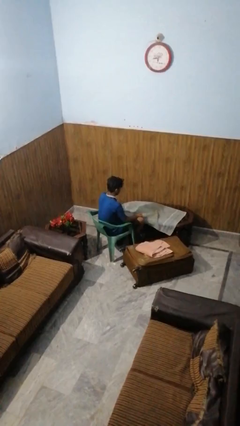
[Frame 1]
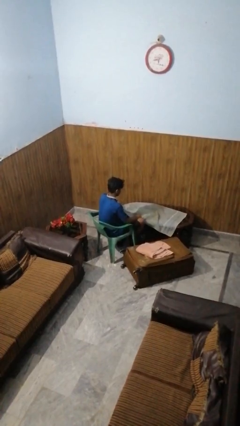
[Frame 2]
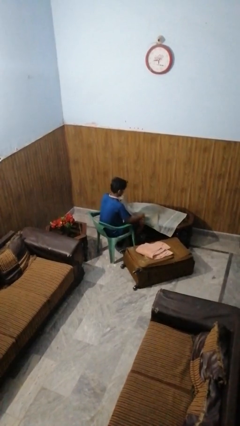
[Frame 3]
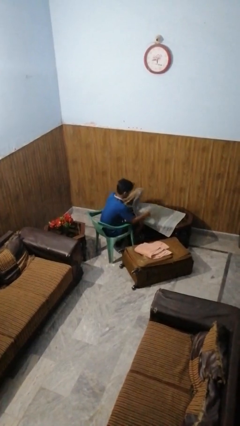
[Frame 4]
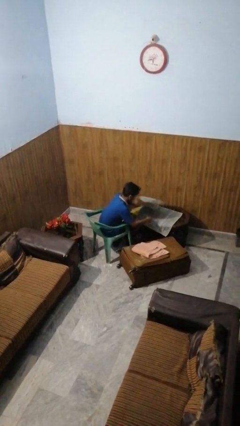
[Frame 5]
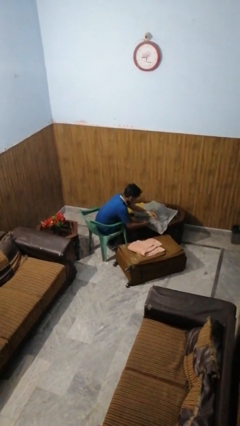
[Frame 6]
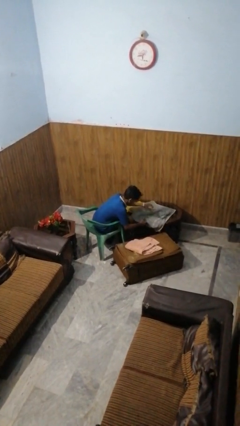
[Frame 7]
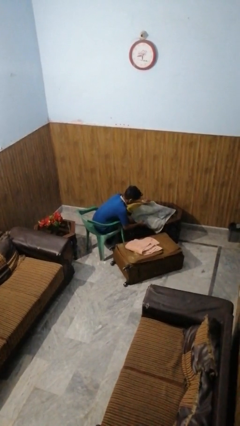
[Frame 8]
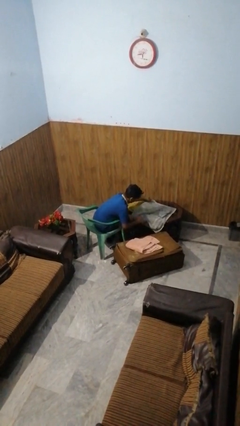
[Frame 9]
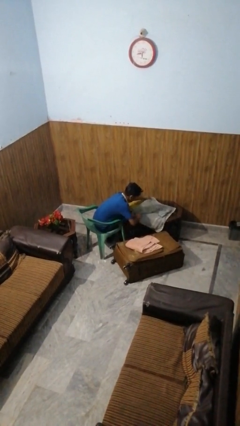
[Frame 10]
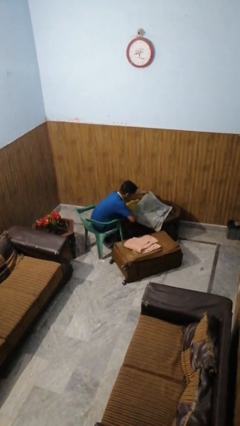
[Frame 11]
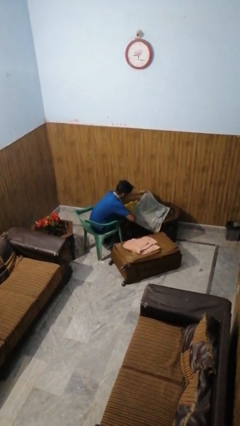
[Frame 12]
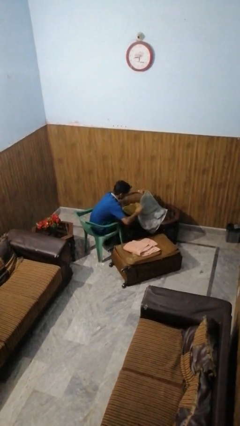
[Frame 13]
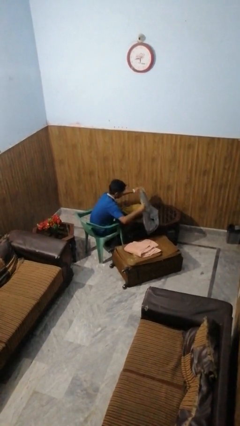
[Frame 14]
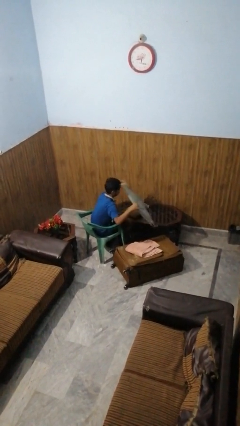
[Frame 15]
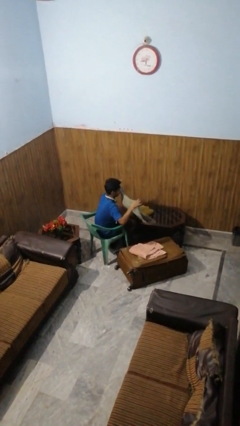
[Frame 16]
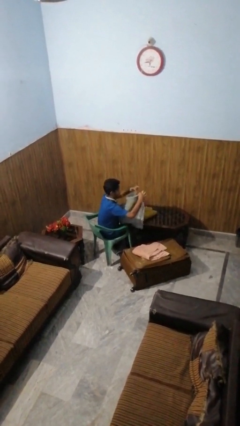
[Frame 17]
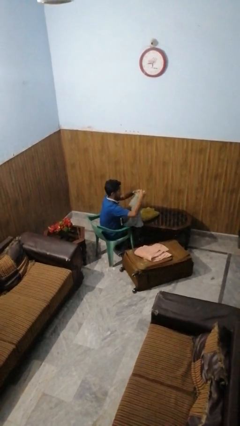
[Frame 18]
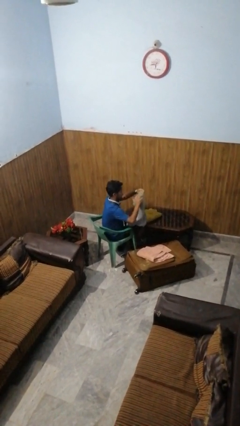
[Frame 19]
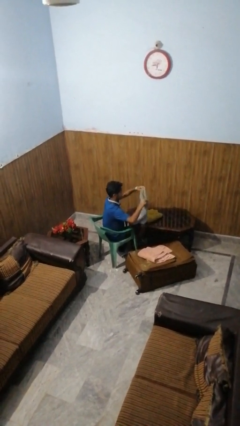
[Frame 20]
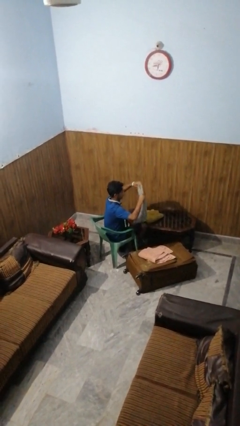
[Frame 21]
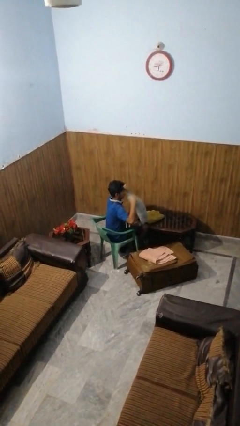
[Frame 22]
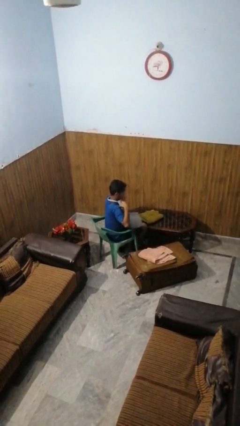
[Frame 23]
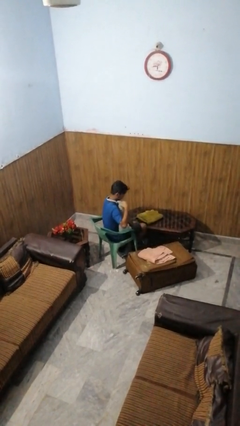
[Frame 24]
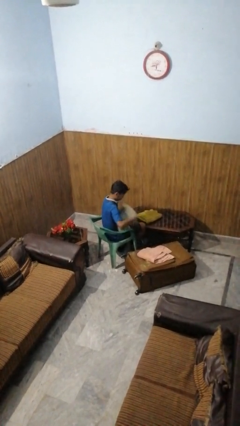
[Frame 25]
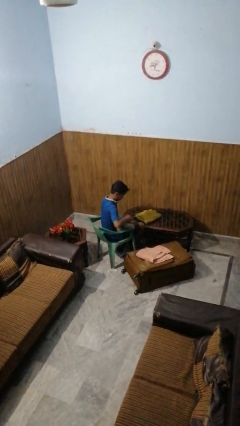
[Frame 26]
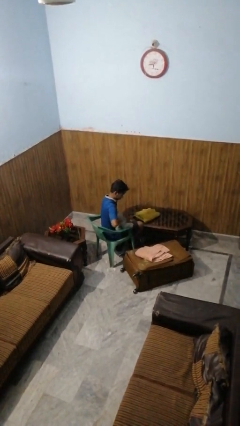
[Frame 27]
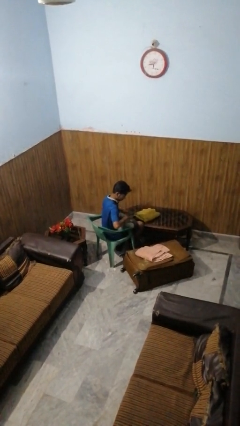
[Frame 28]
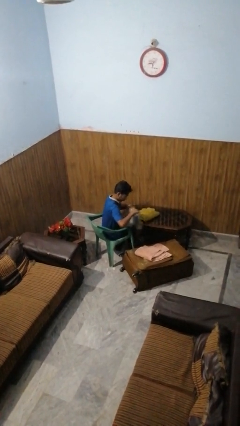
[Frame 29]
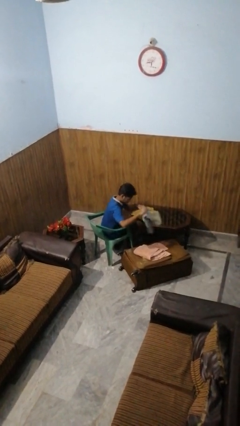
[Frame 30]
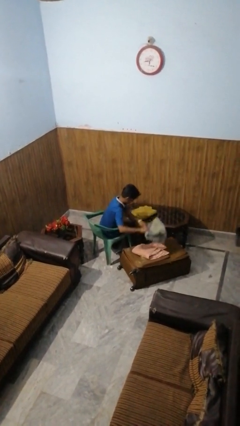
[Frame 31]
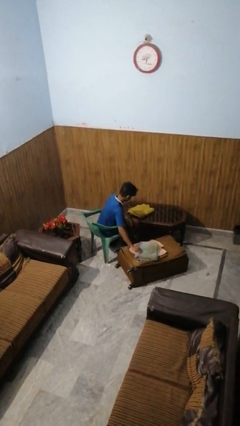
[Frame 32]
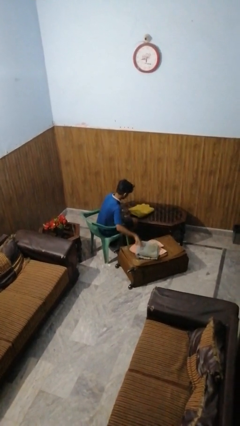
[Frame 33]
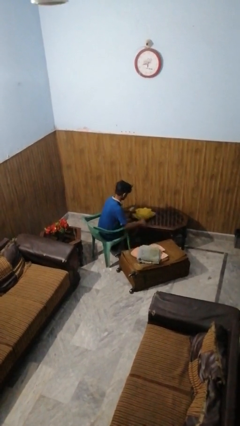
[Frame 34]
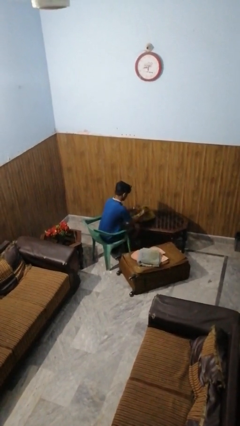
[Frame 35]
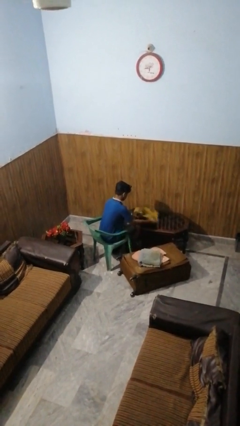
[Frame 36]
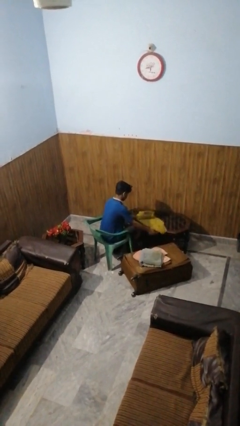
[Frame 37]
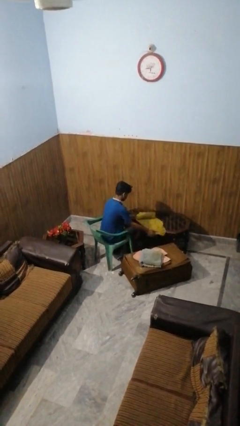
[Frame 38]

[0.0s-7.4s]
person folds towel

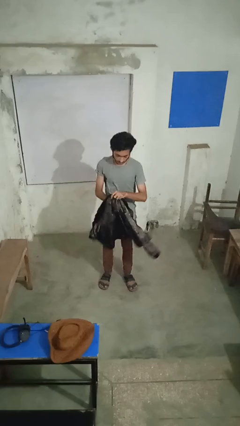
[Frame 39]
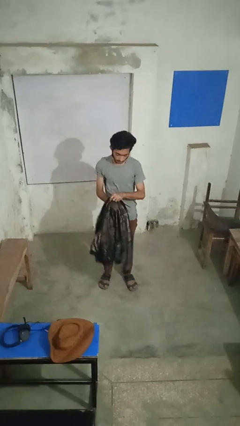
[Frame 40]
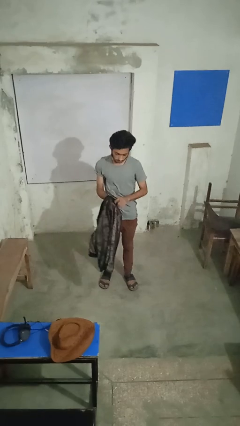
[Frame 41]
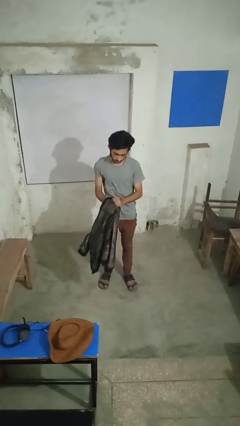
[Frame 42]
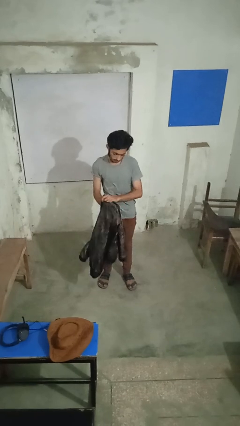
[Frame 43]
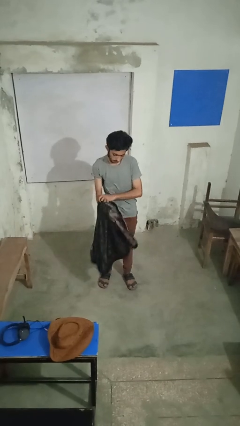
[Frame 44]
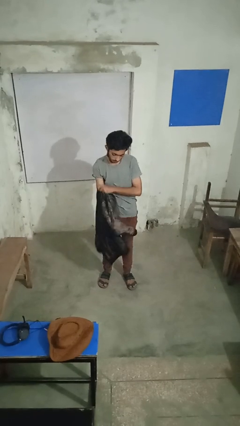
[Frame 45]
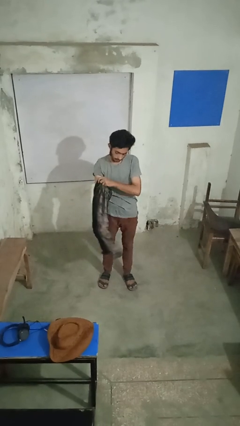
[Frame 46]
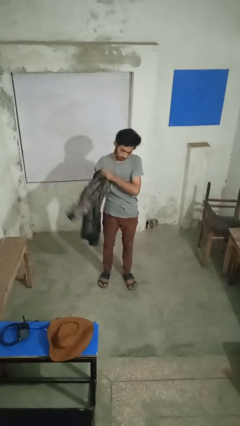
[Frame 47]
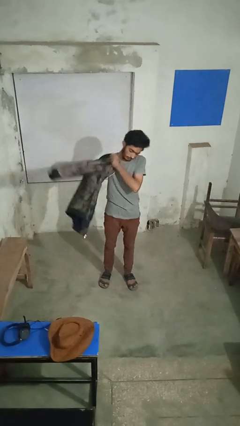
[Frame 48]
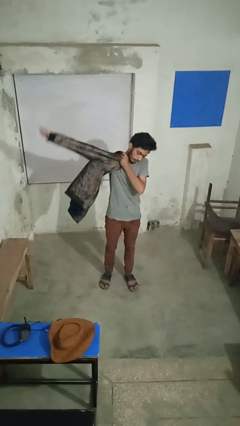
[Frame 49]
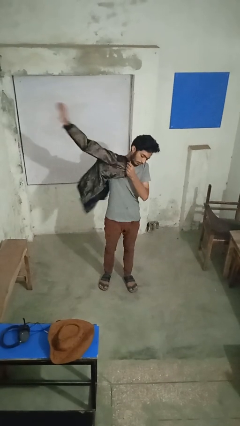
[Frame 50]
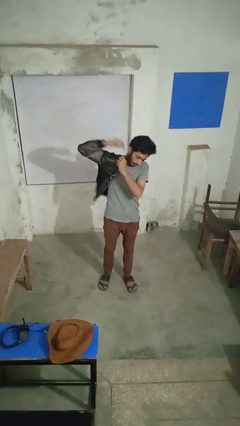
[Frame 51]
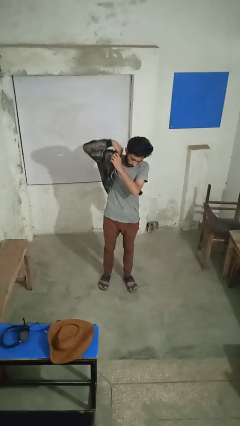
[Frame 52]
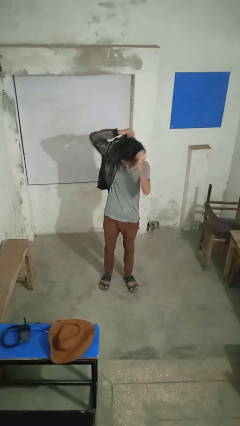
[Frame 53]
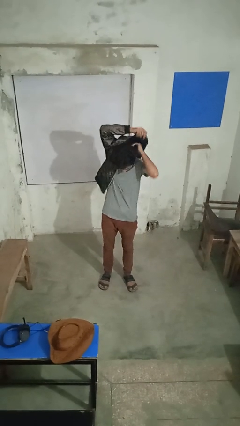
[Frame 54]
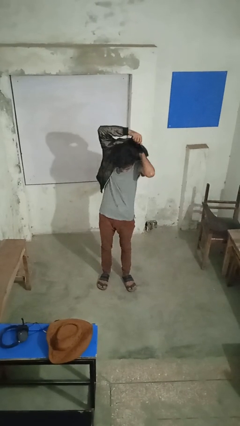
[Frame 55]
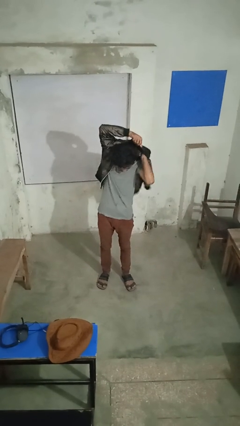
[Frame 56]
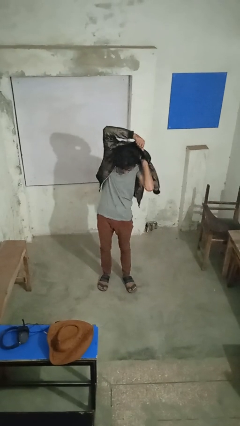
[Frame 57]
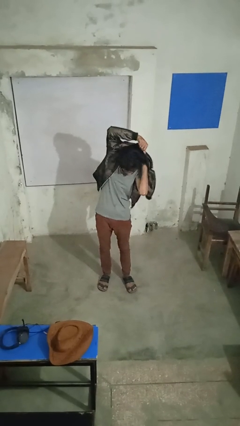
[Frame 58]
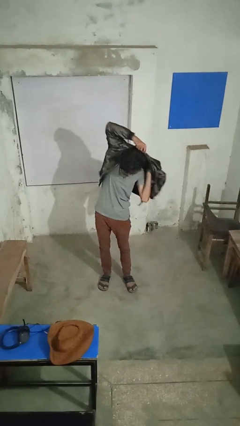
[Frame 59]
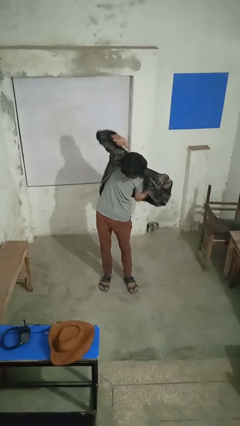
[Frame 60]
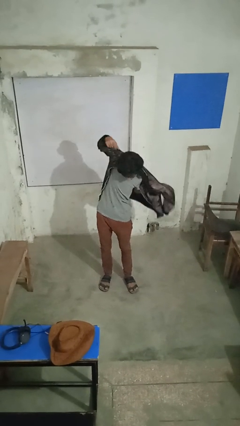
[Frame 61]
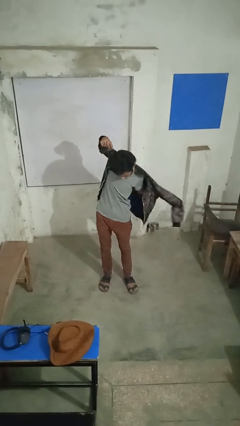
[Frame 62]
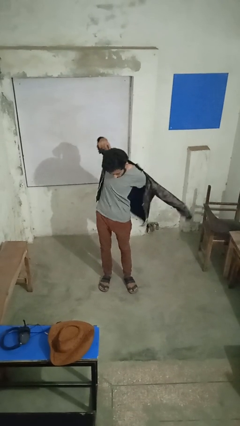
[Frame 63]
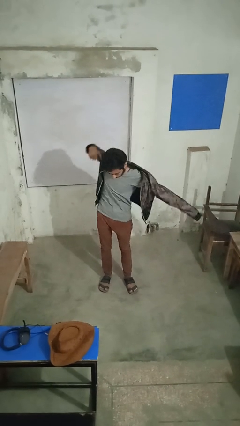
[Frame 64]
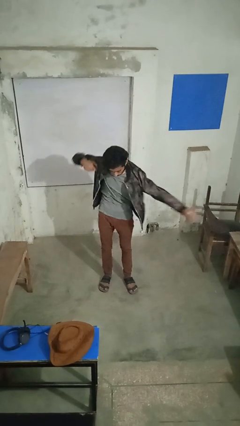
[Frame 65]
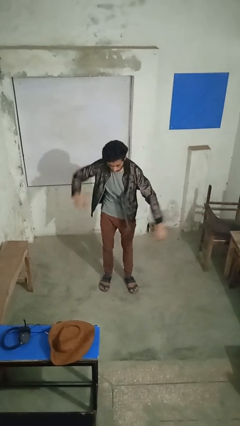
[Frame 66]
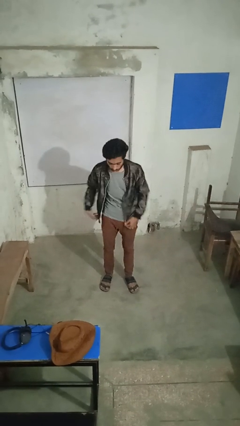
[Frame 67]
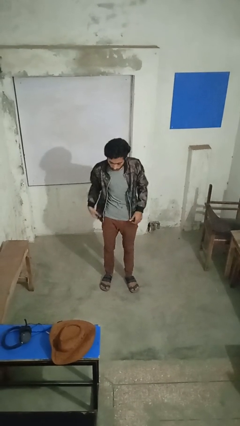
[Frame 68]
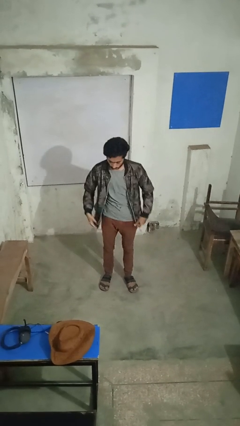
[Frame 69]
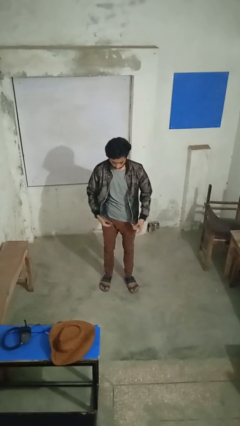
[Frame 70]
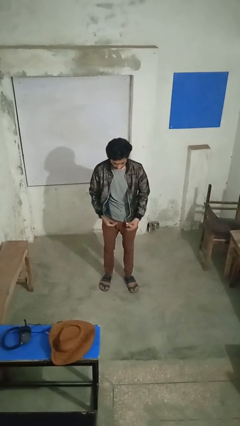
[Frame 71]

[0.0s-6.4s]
person puts on jacket

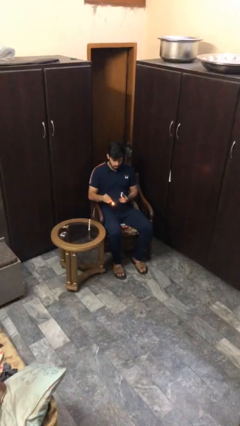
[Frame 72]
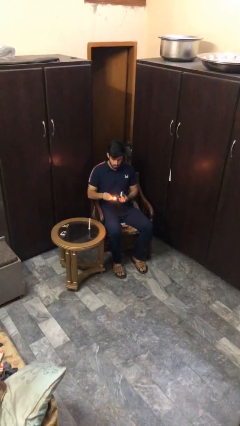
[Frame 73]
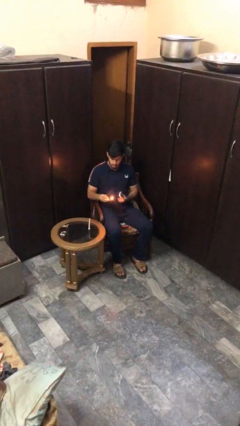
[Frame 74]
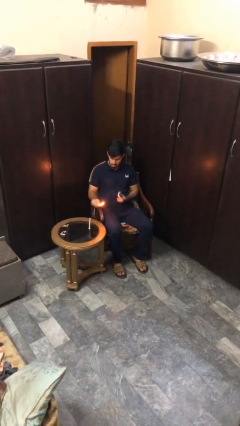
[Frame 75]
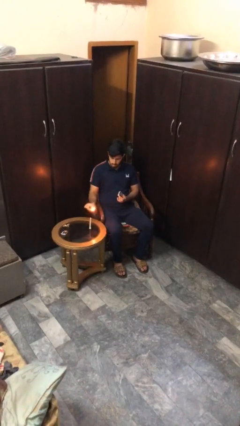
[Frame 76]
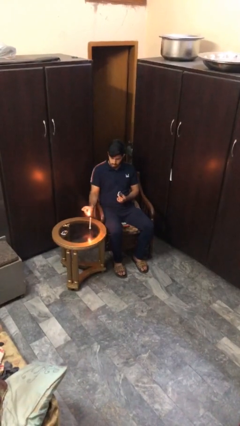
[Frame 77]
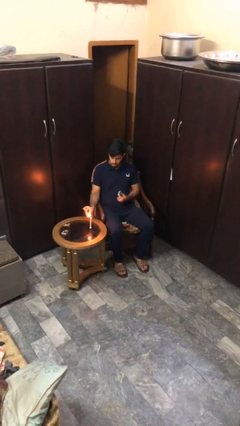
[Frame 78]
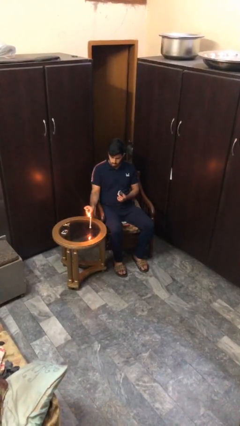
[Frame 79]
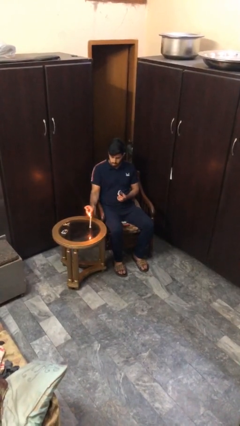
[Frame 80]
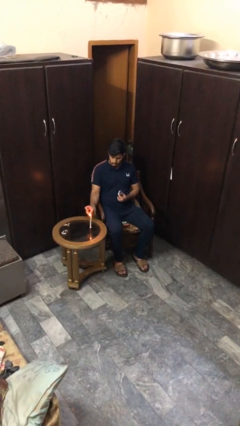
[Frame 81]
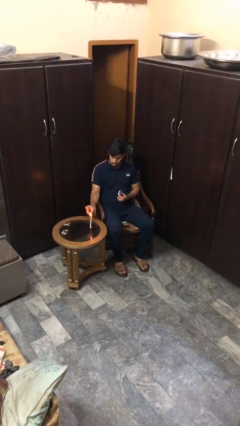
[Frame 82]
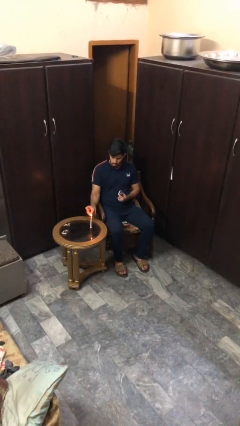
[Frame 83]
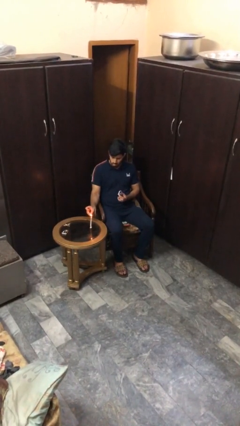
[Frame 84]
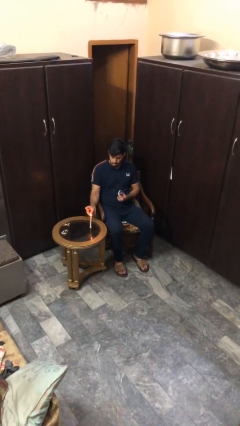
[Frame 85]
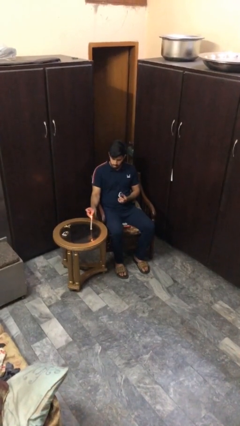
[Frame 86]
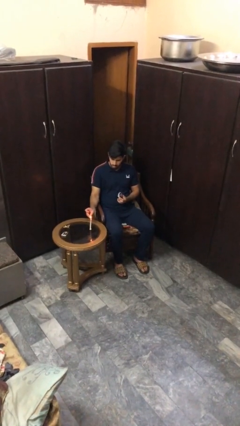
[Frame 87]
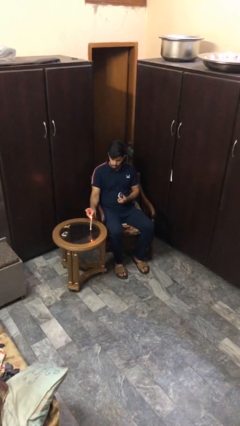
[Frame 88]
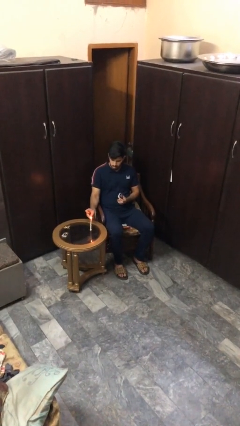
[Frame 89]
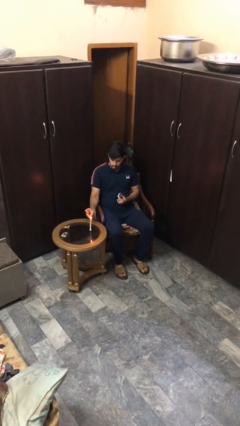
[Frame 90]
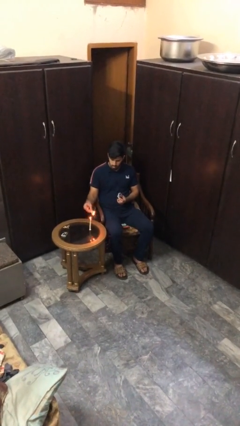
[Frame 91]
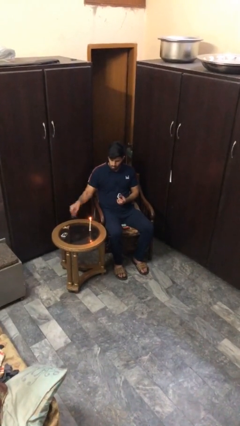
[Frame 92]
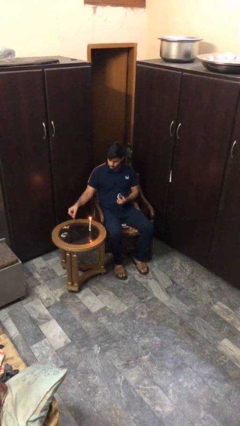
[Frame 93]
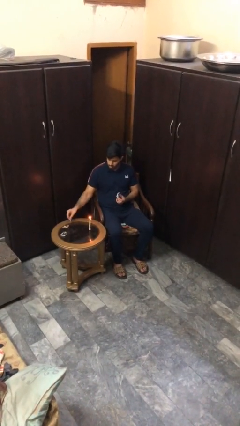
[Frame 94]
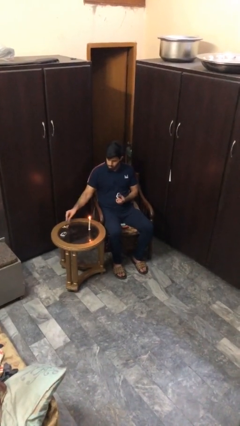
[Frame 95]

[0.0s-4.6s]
person lights candle
